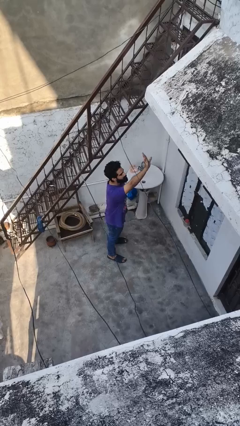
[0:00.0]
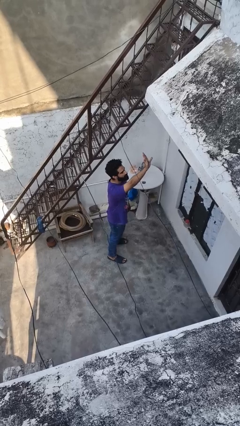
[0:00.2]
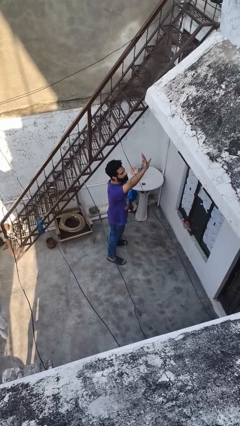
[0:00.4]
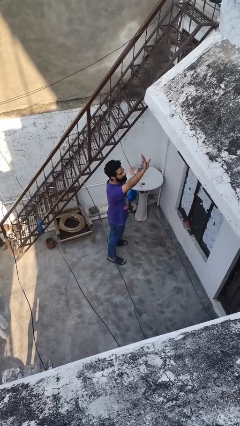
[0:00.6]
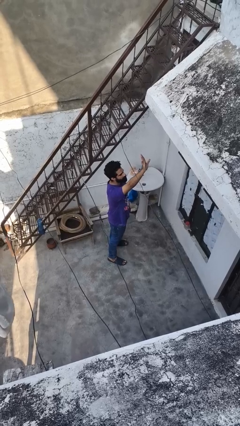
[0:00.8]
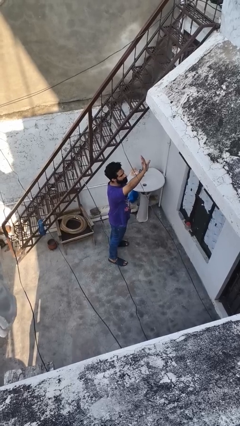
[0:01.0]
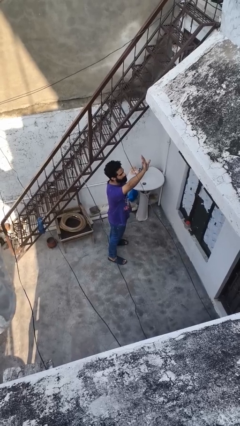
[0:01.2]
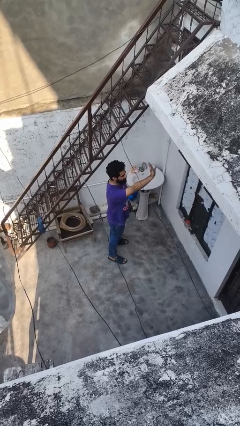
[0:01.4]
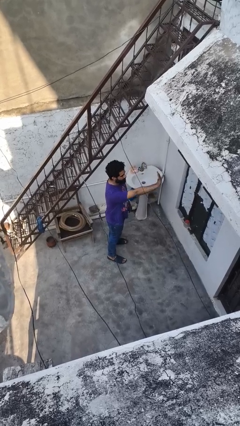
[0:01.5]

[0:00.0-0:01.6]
person gestures raise hand

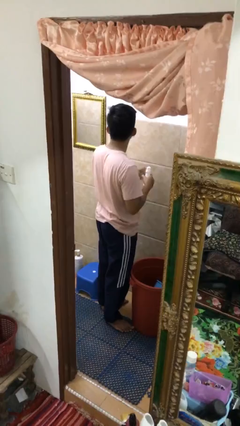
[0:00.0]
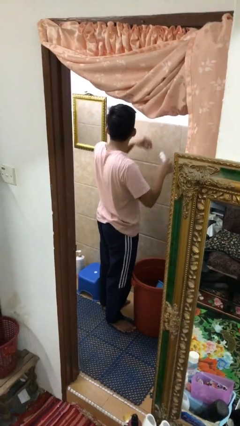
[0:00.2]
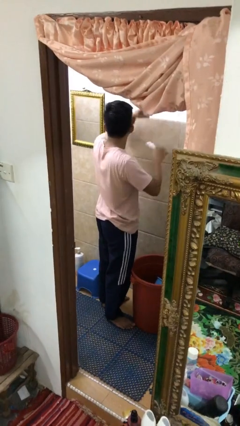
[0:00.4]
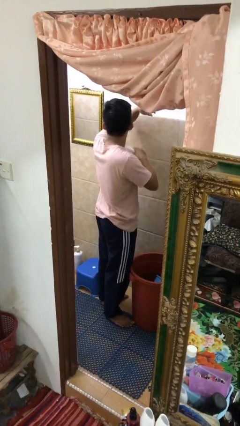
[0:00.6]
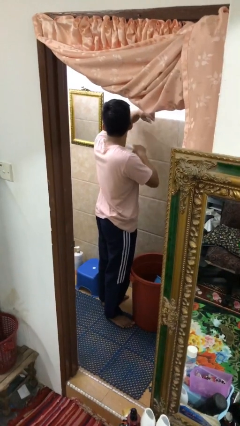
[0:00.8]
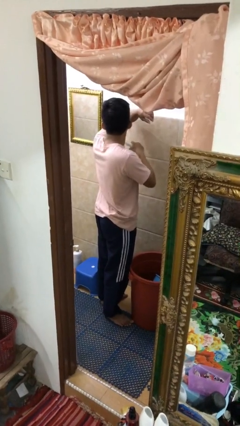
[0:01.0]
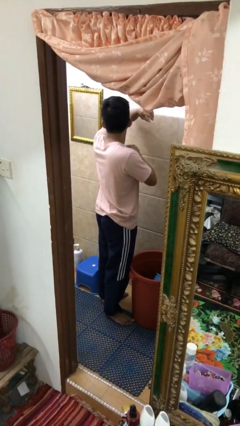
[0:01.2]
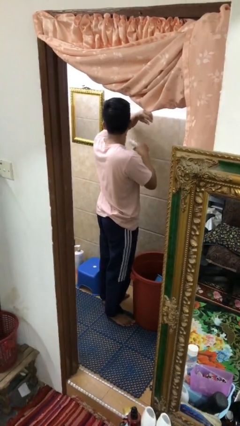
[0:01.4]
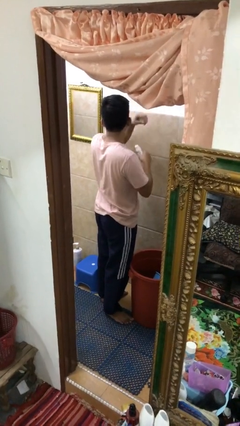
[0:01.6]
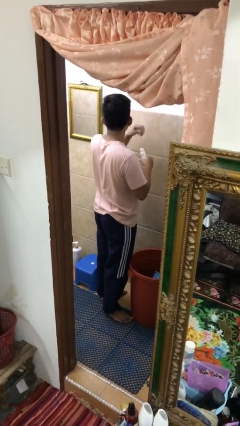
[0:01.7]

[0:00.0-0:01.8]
person applies deodorant

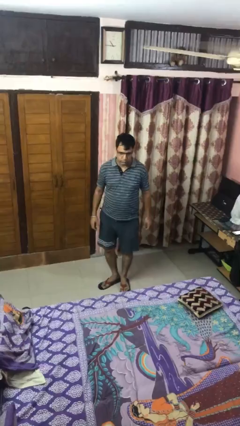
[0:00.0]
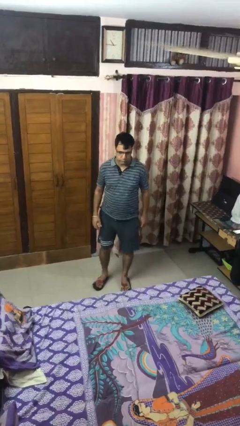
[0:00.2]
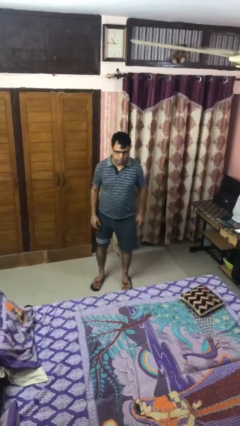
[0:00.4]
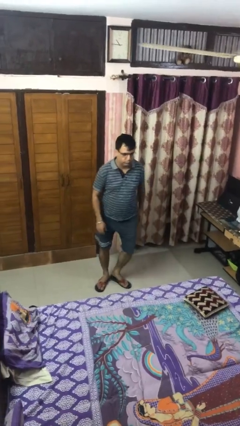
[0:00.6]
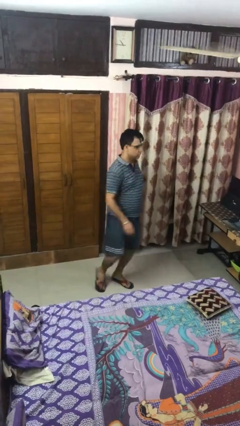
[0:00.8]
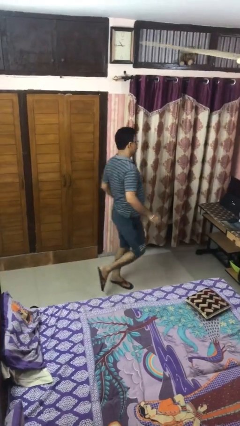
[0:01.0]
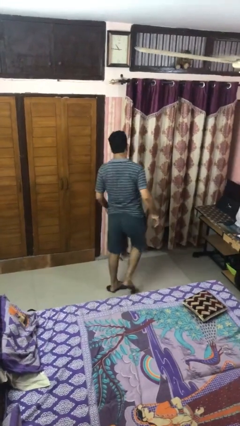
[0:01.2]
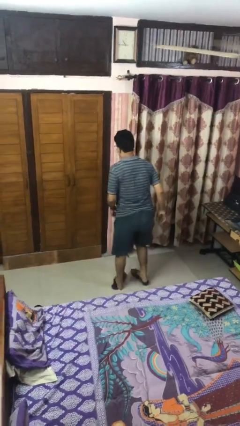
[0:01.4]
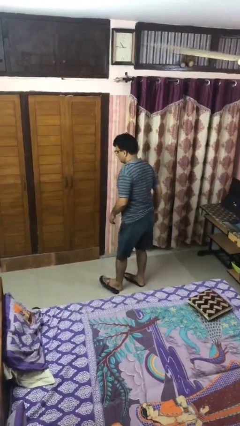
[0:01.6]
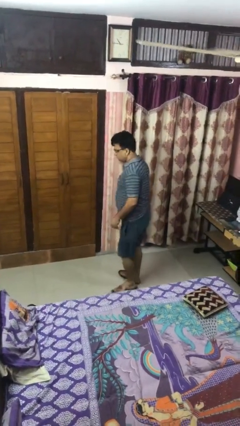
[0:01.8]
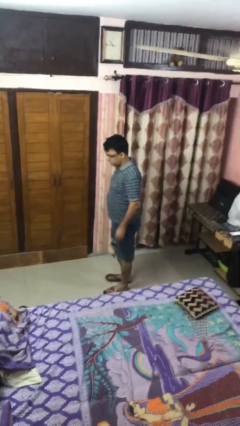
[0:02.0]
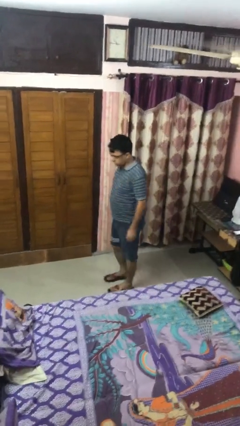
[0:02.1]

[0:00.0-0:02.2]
person twirls

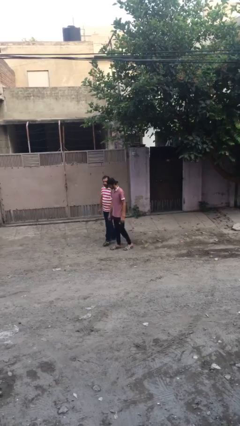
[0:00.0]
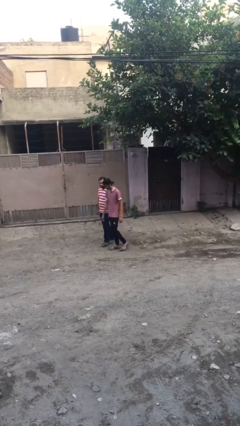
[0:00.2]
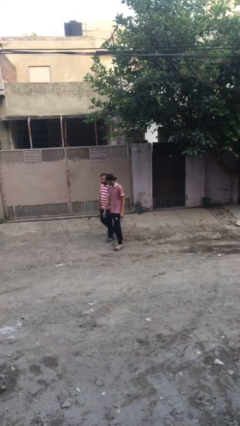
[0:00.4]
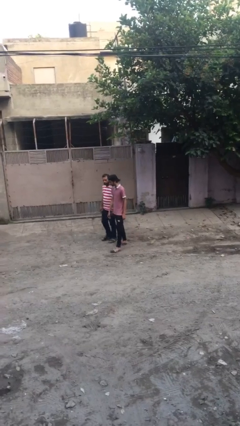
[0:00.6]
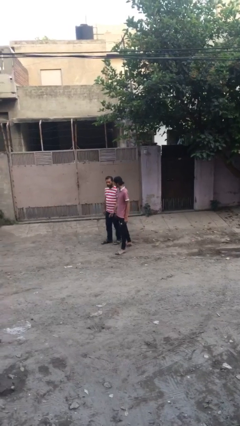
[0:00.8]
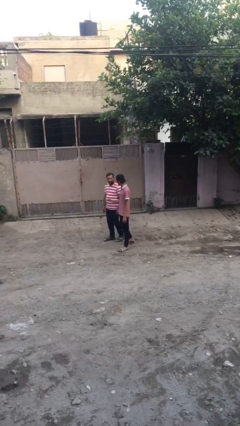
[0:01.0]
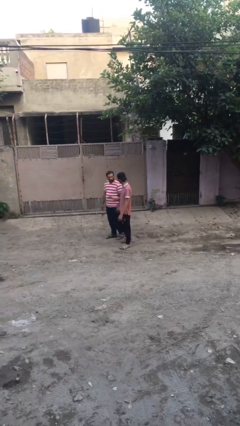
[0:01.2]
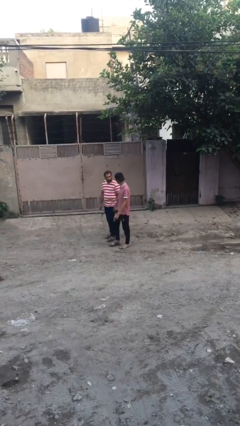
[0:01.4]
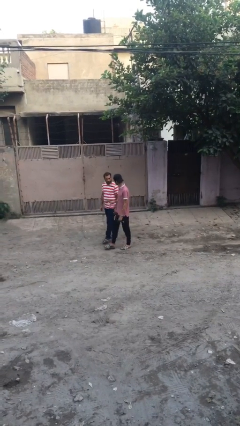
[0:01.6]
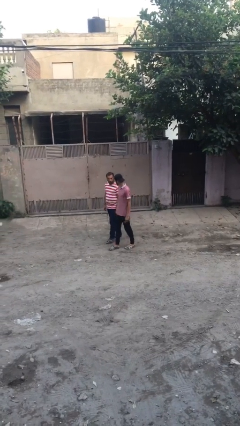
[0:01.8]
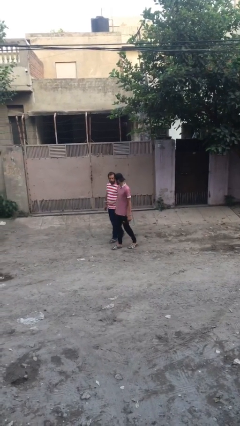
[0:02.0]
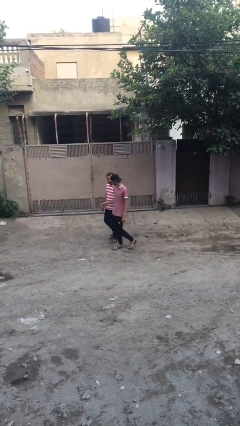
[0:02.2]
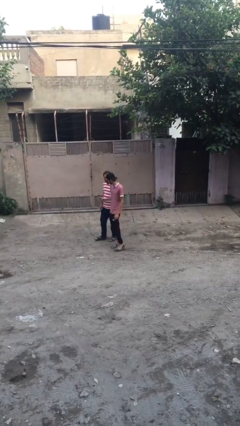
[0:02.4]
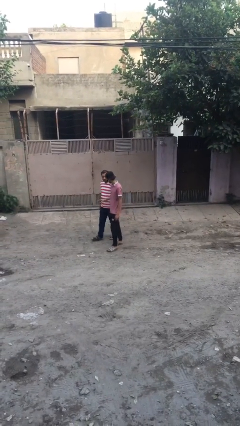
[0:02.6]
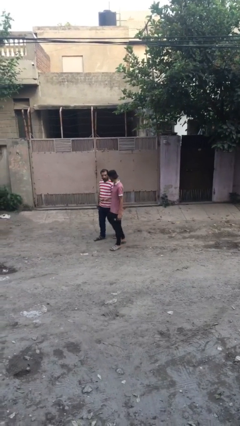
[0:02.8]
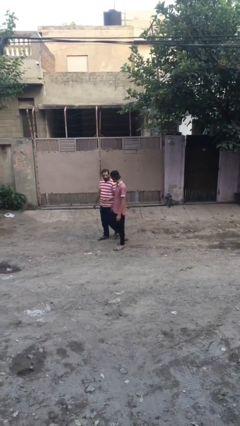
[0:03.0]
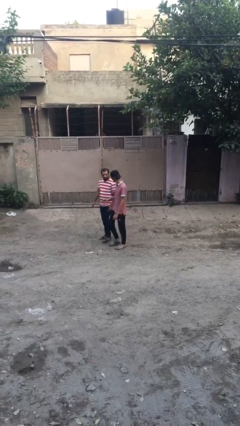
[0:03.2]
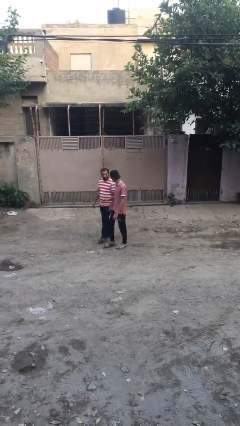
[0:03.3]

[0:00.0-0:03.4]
person talks to person

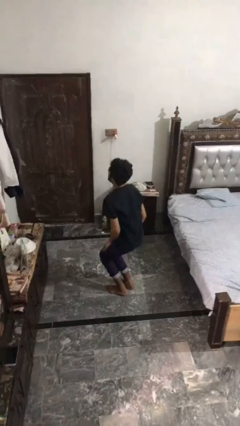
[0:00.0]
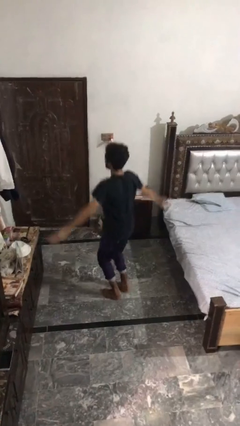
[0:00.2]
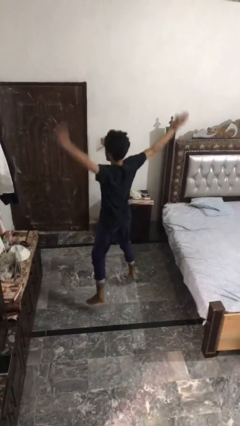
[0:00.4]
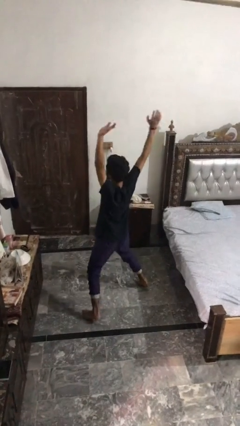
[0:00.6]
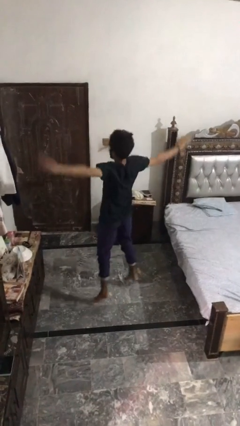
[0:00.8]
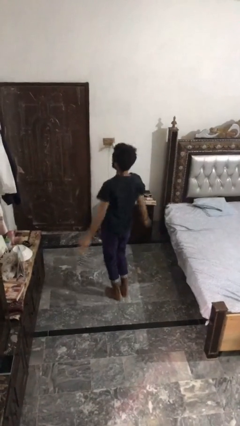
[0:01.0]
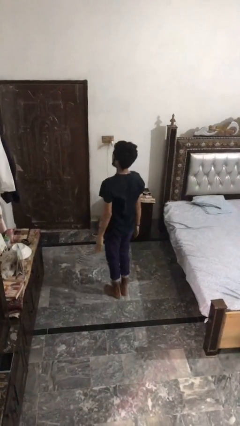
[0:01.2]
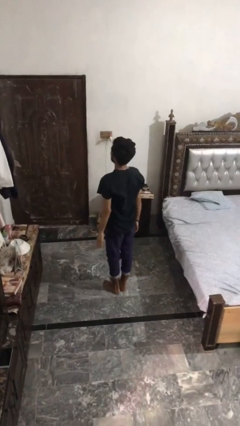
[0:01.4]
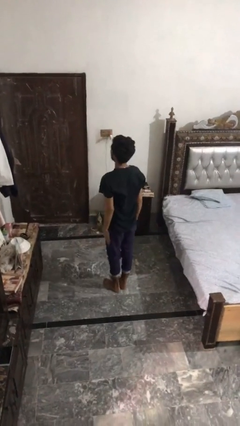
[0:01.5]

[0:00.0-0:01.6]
person exercises with jumping jacks

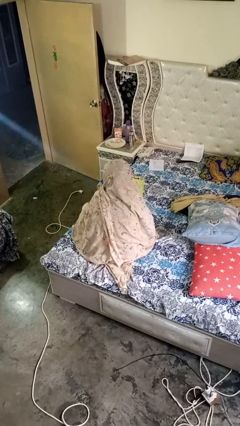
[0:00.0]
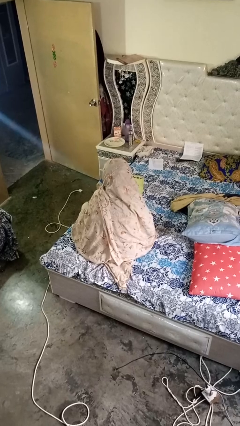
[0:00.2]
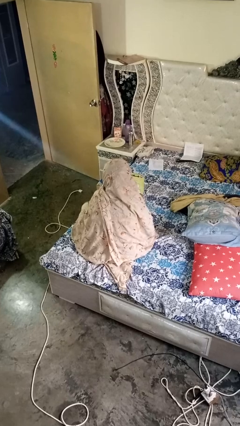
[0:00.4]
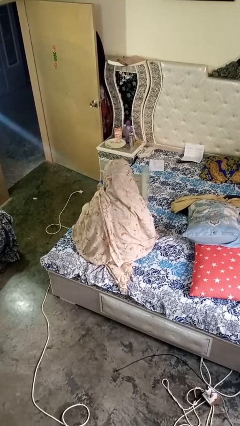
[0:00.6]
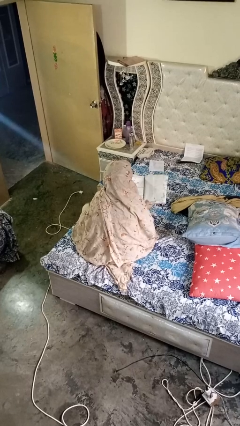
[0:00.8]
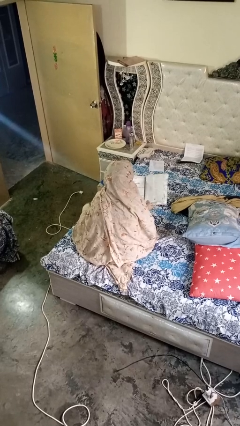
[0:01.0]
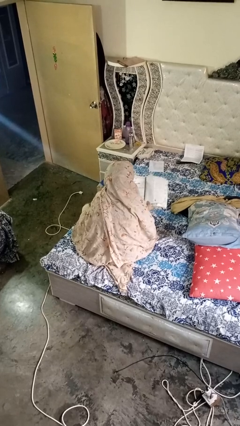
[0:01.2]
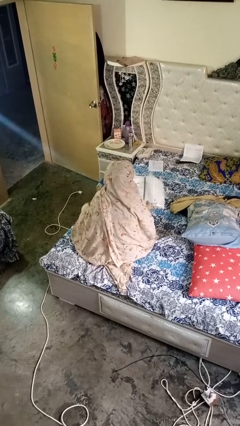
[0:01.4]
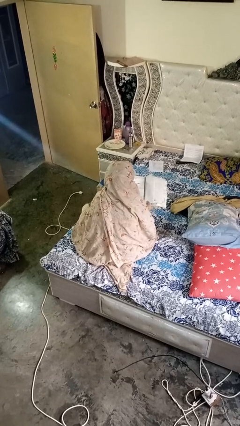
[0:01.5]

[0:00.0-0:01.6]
person reads magazine

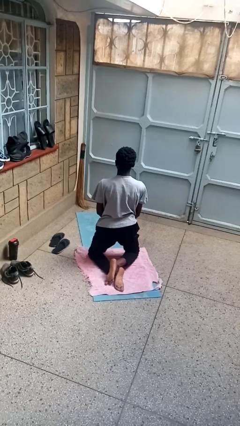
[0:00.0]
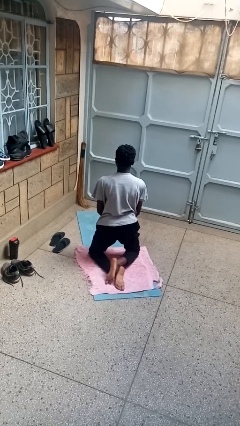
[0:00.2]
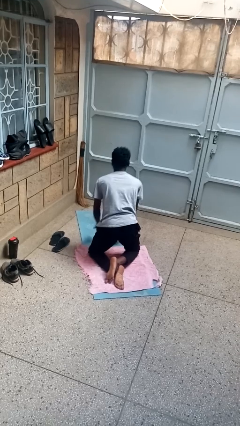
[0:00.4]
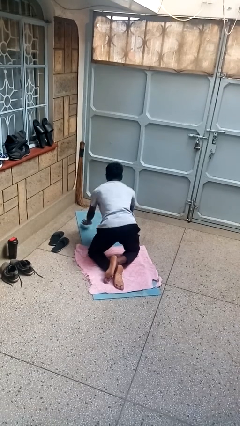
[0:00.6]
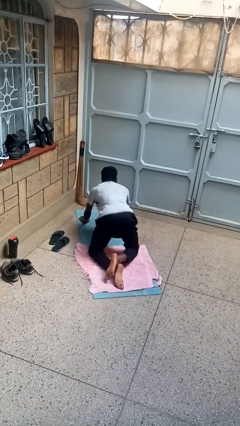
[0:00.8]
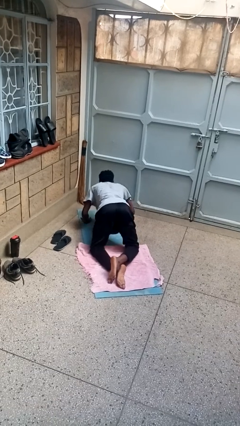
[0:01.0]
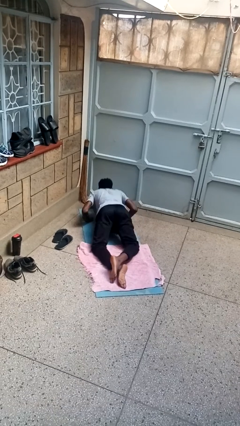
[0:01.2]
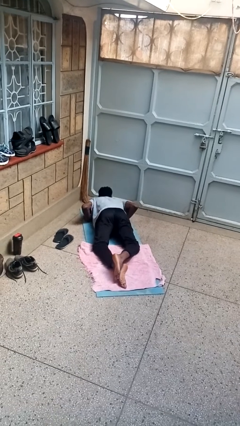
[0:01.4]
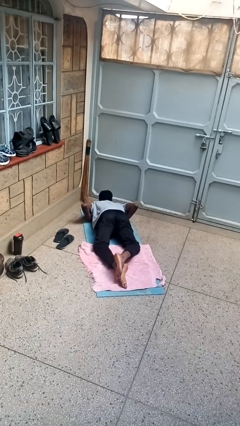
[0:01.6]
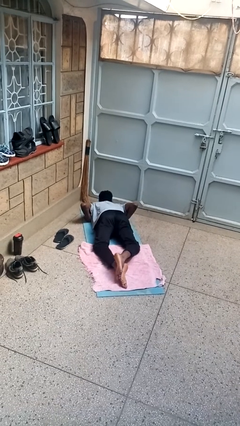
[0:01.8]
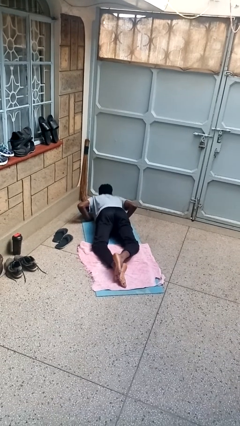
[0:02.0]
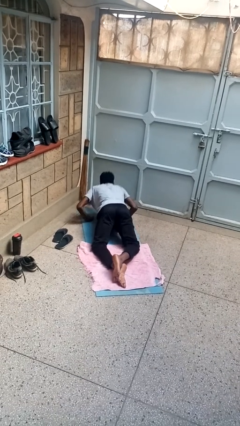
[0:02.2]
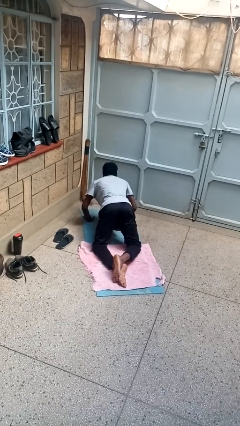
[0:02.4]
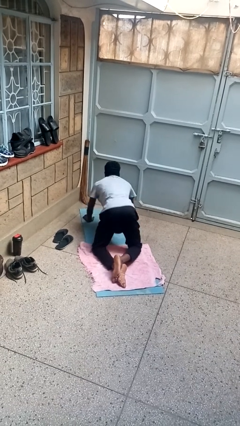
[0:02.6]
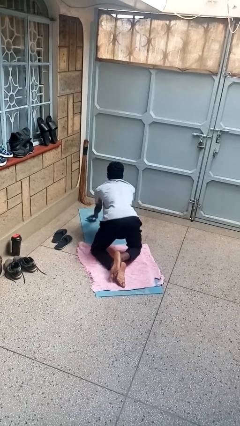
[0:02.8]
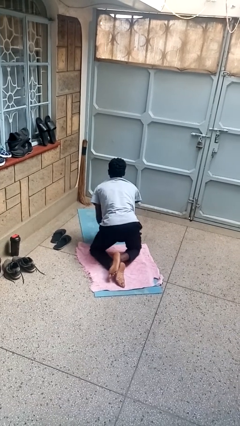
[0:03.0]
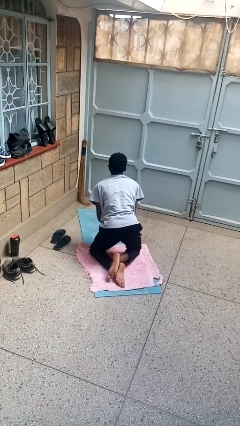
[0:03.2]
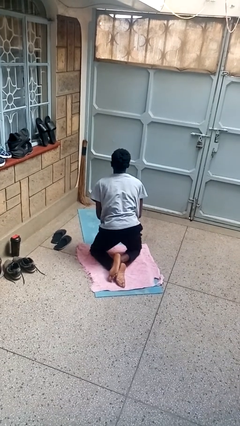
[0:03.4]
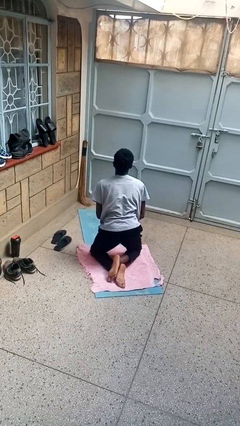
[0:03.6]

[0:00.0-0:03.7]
person exercises with pushup

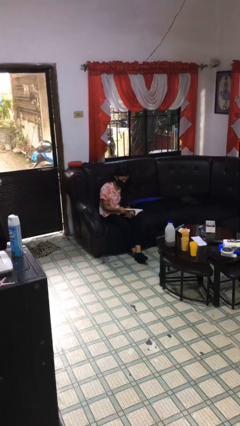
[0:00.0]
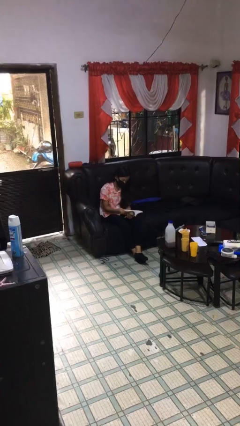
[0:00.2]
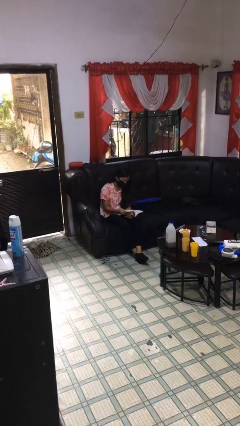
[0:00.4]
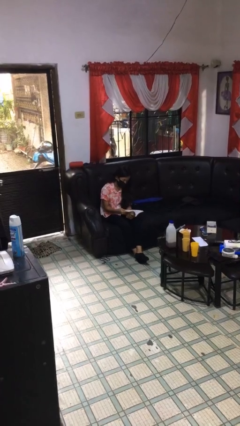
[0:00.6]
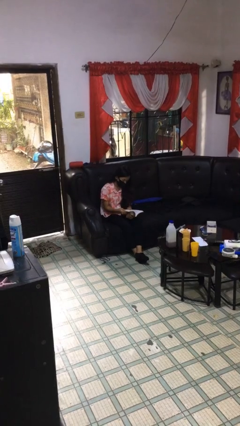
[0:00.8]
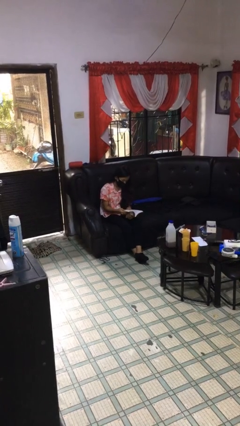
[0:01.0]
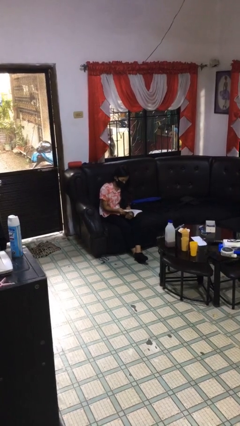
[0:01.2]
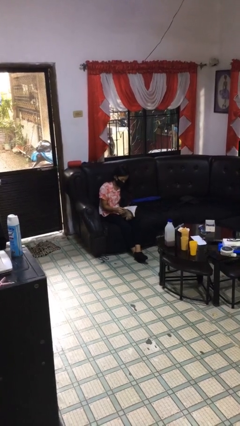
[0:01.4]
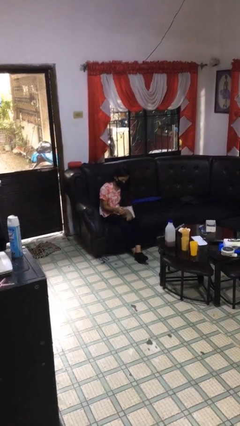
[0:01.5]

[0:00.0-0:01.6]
person reads document
